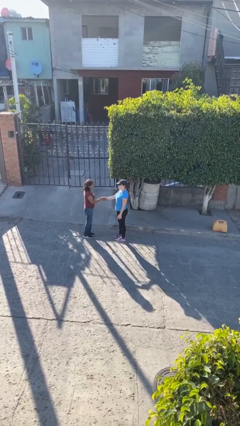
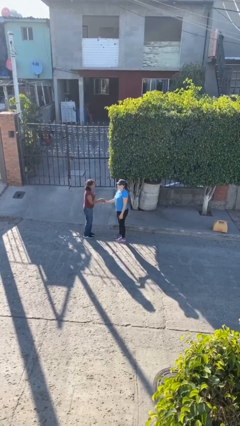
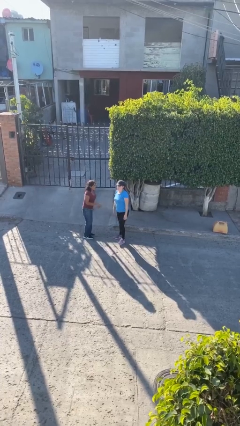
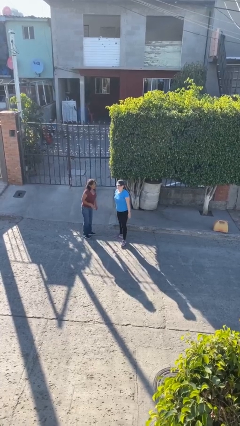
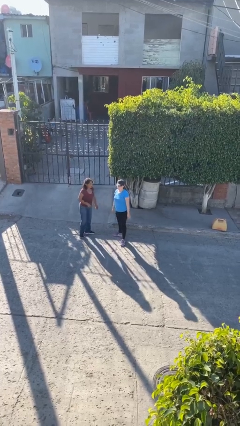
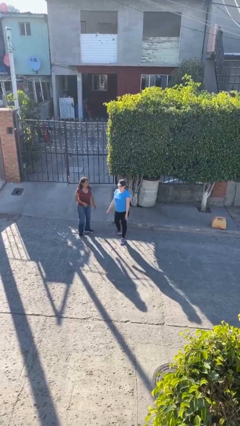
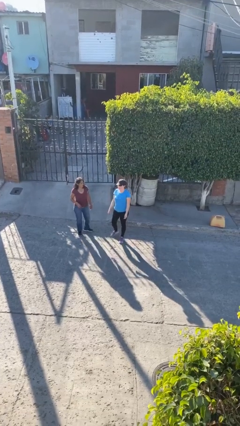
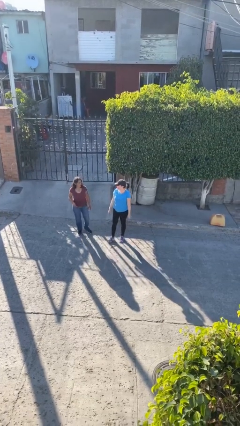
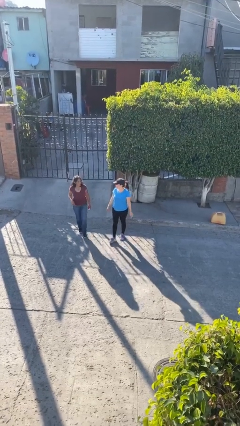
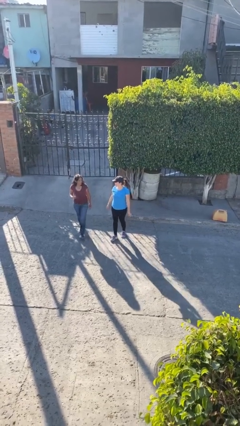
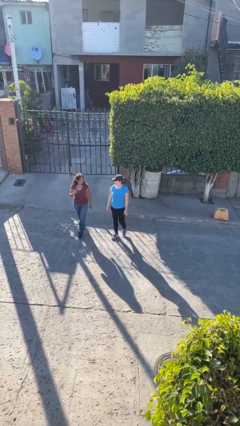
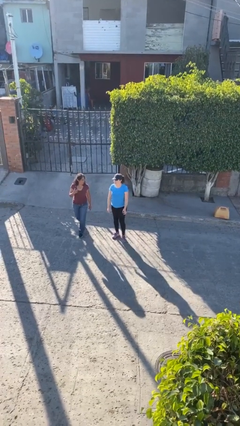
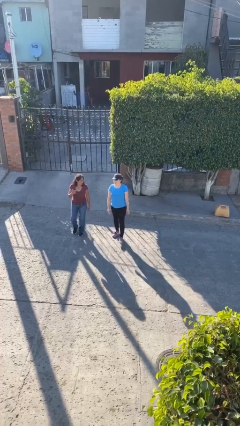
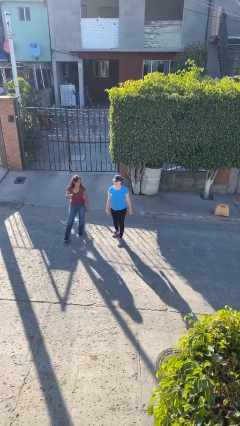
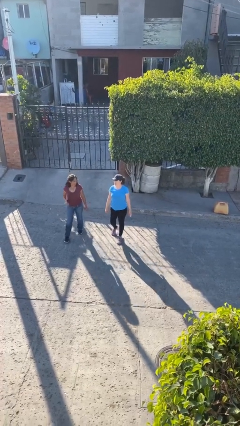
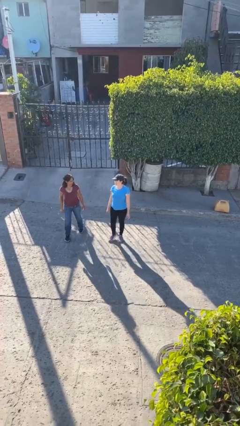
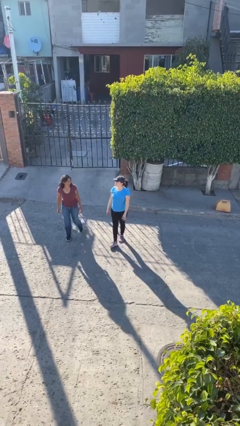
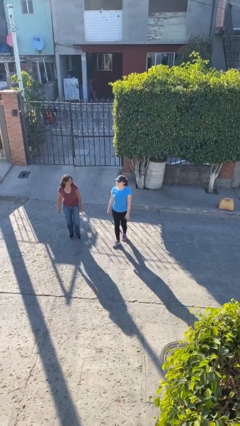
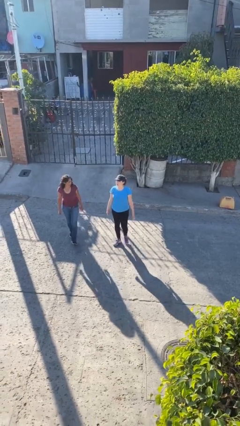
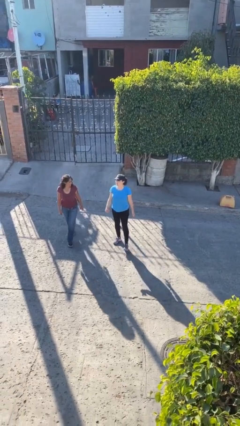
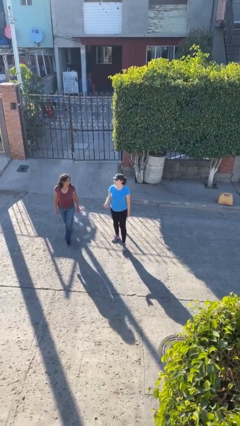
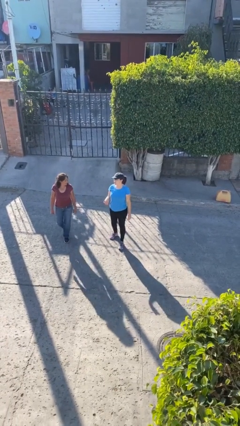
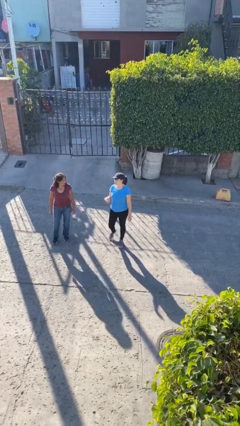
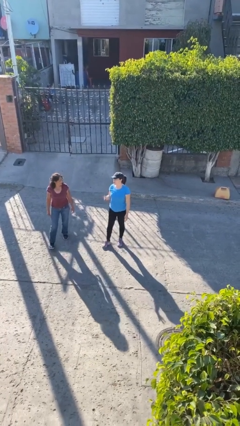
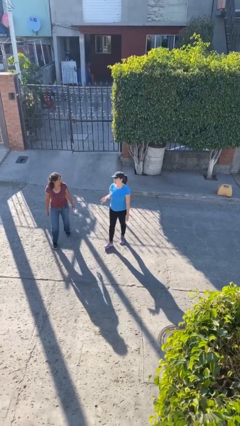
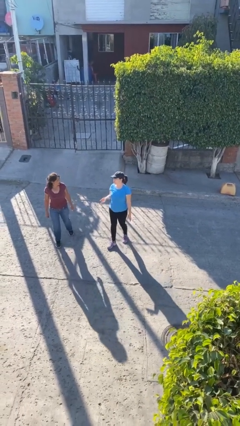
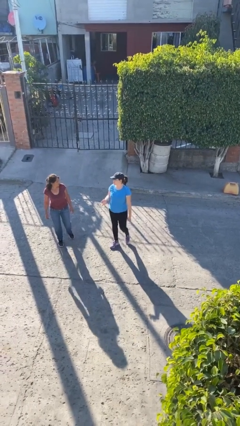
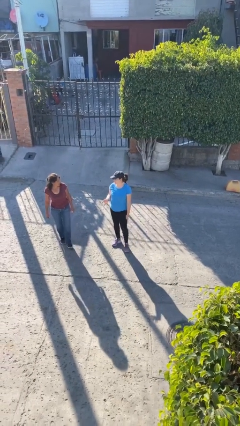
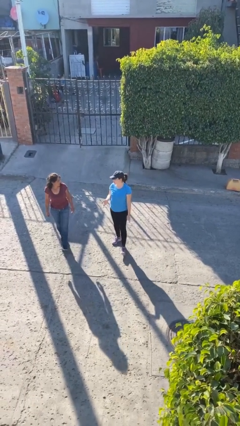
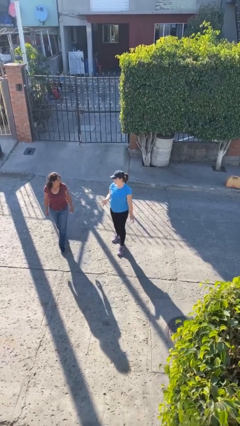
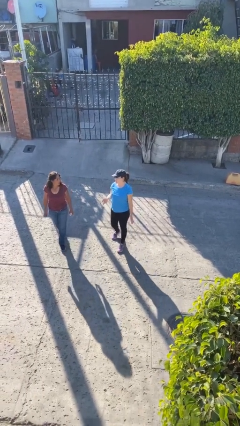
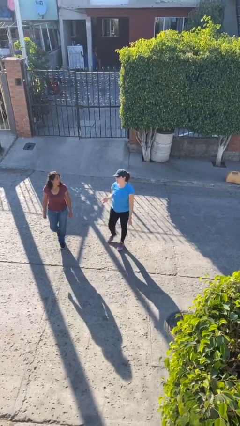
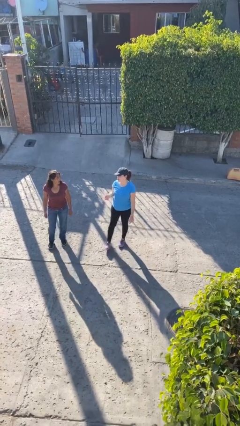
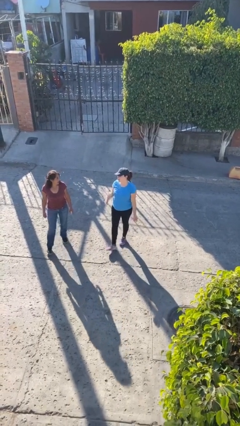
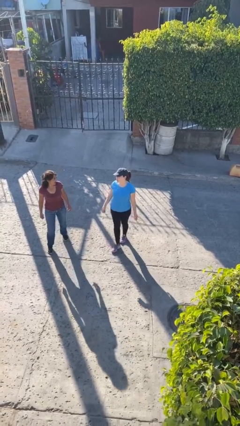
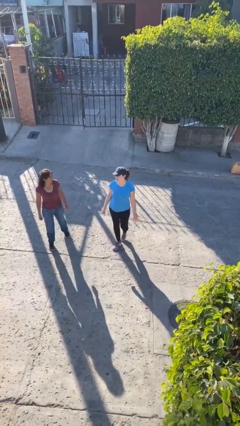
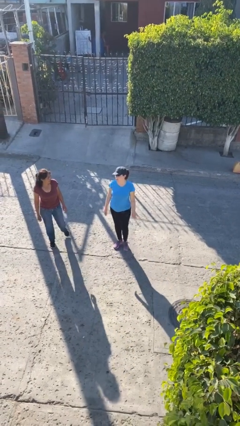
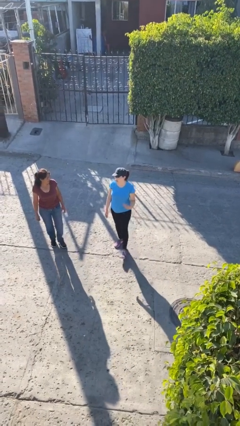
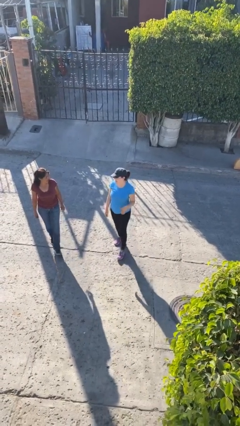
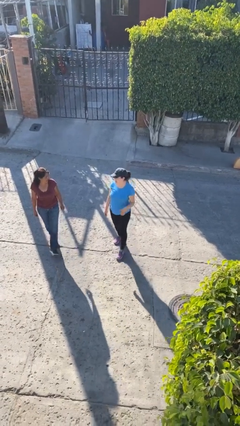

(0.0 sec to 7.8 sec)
person talks to person

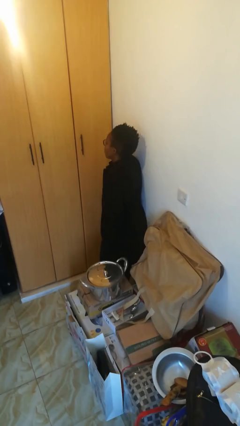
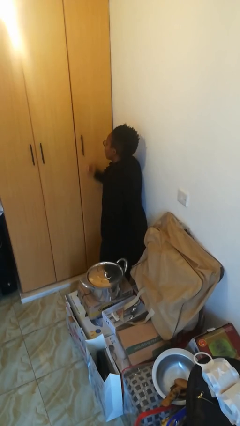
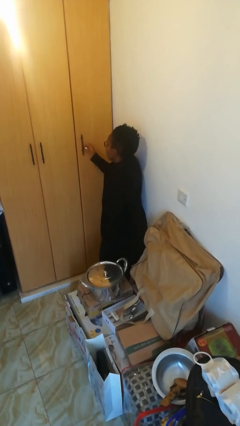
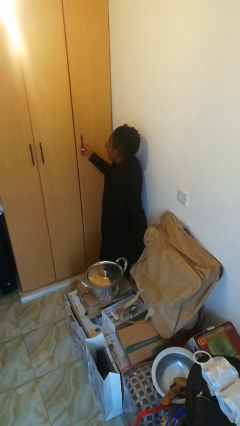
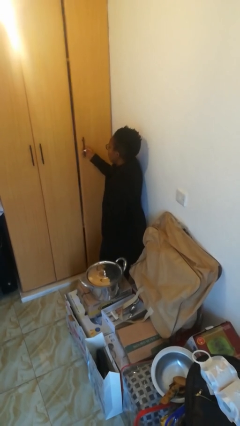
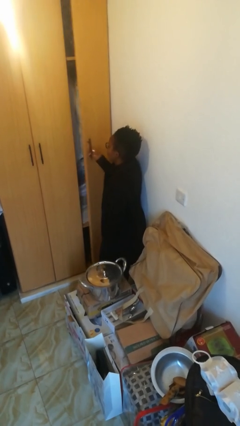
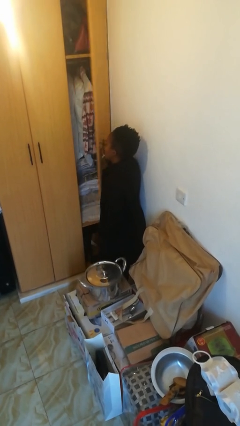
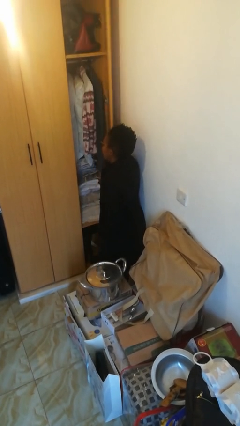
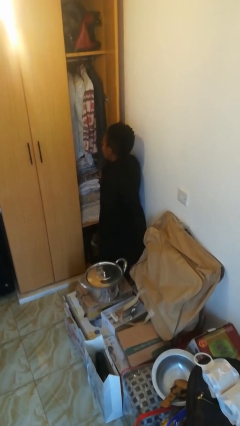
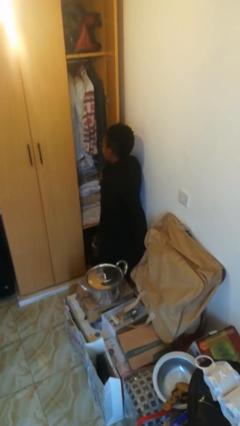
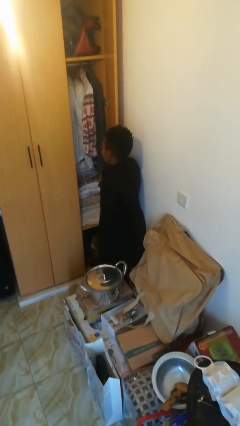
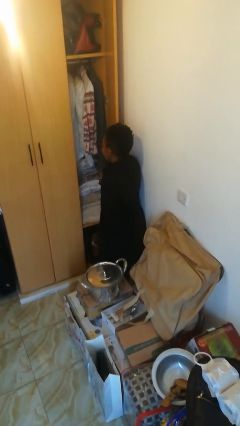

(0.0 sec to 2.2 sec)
person opens closet door

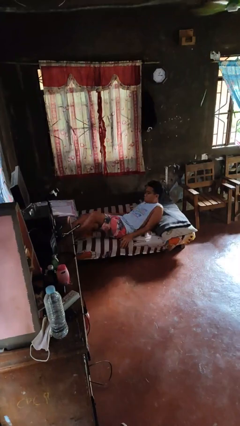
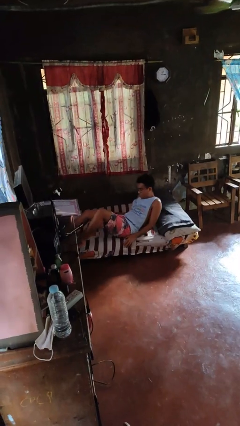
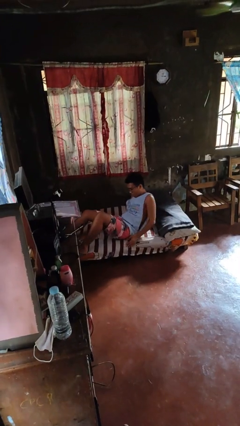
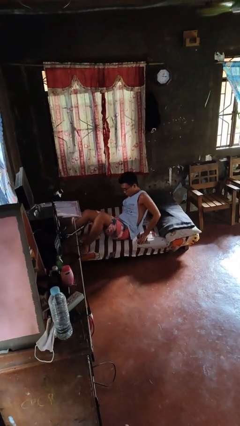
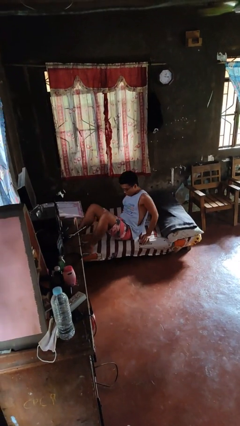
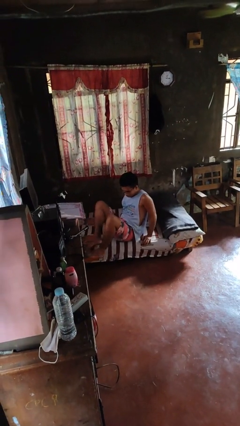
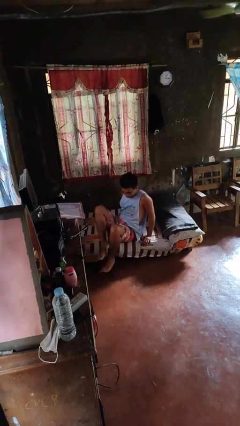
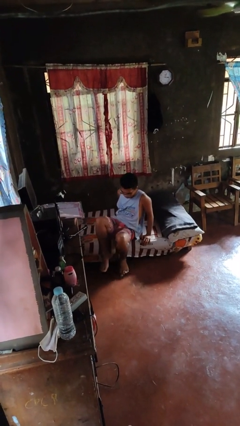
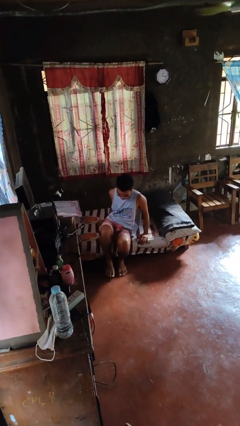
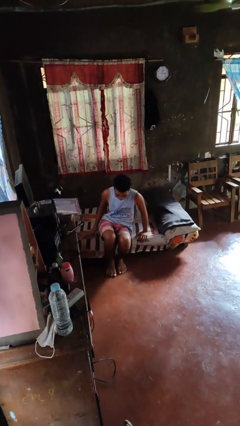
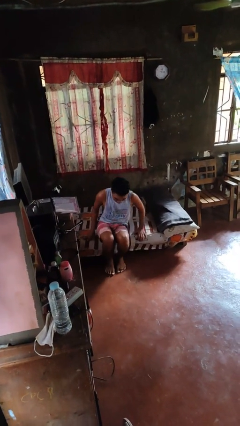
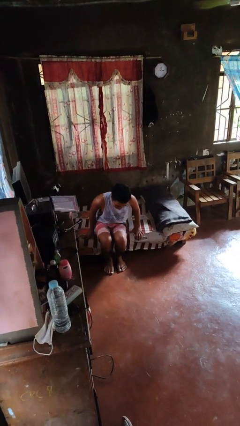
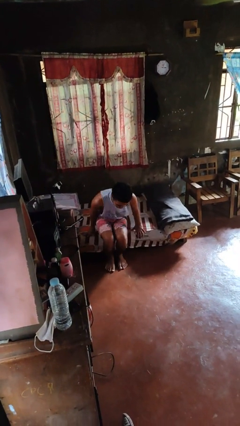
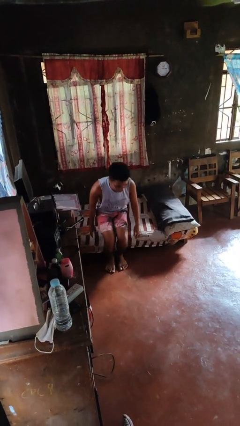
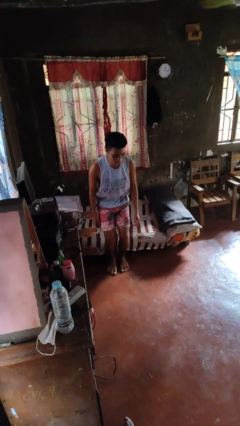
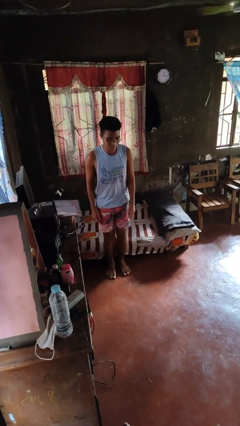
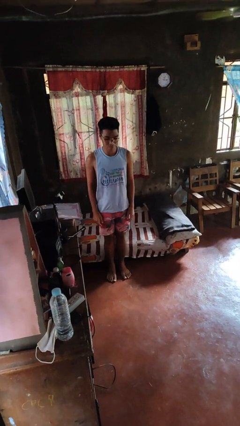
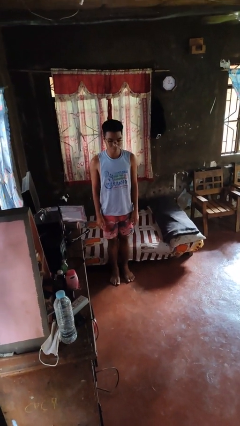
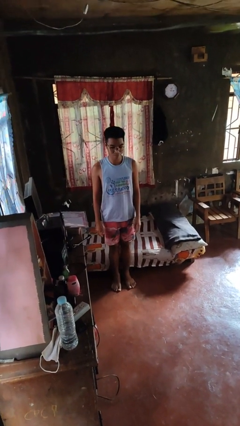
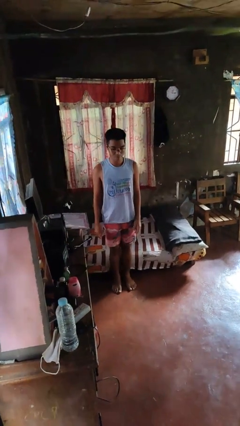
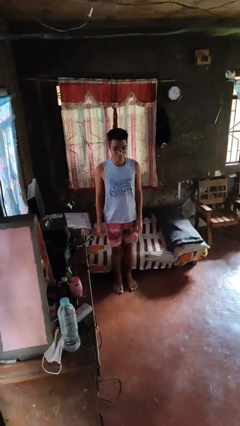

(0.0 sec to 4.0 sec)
person stands up

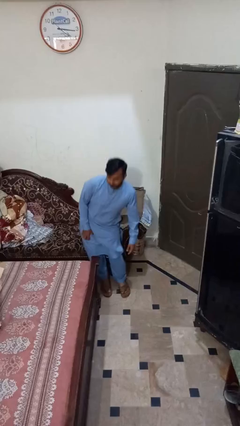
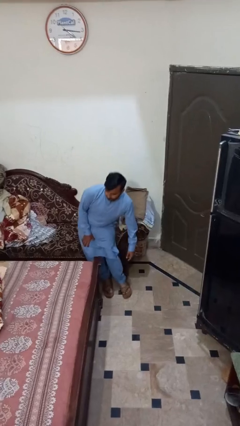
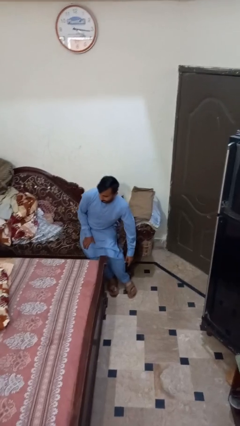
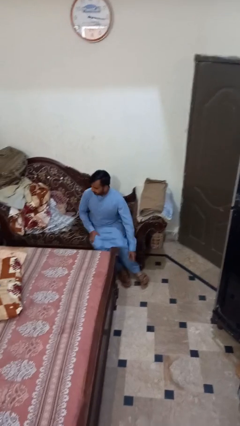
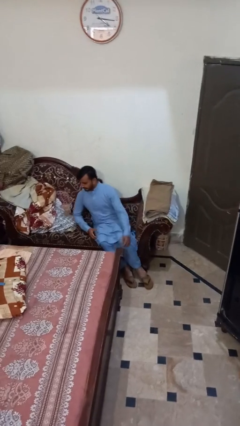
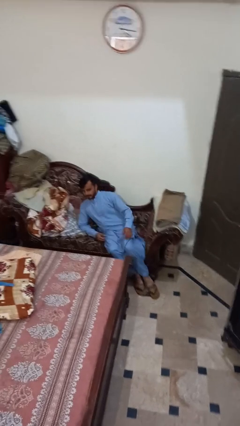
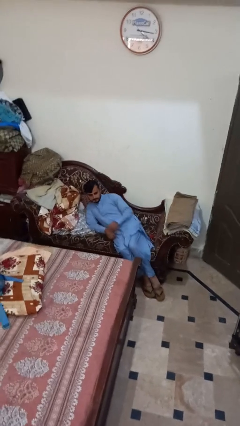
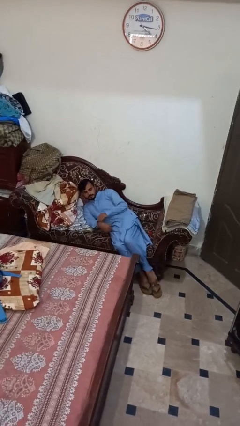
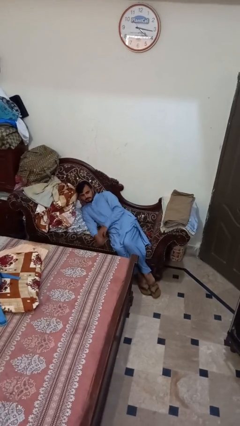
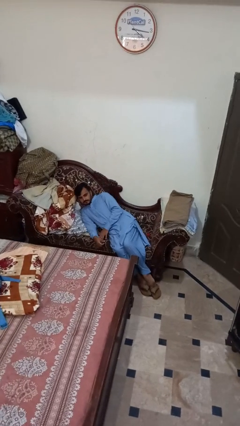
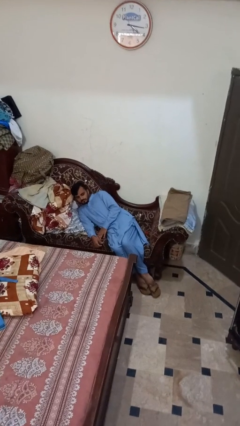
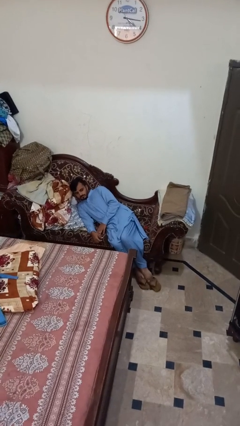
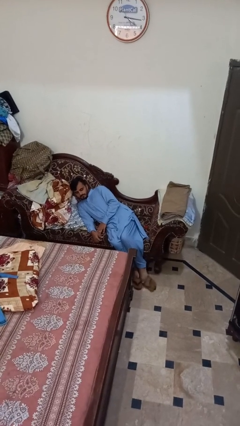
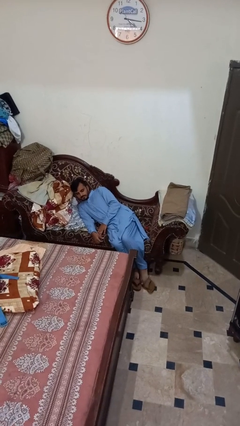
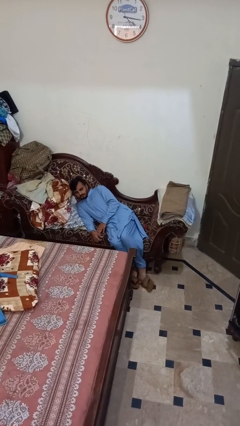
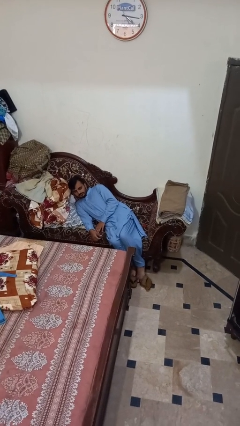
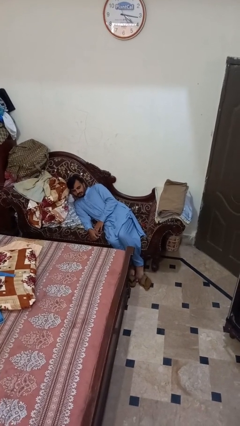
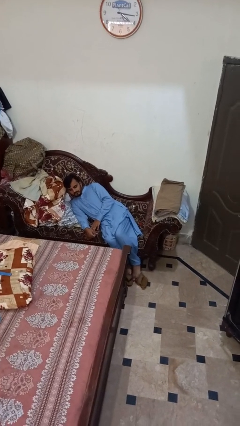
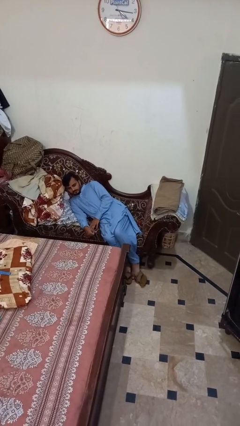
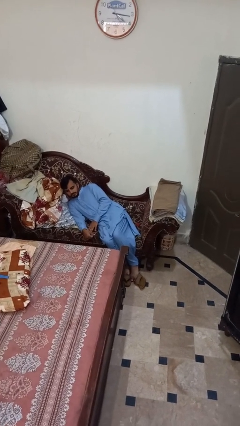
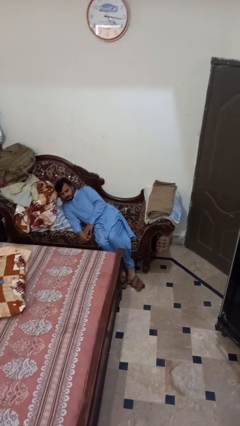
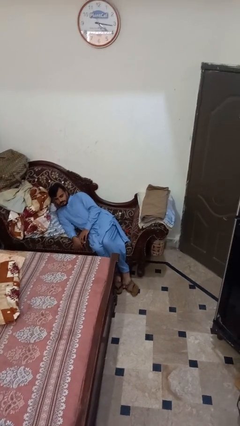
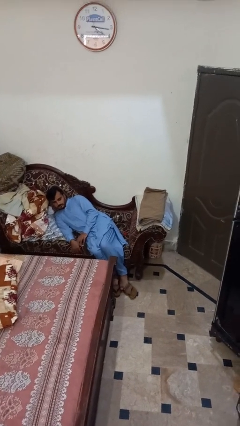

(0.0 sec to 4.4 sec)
person lies down on couch
